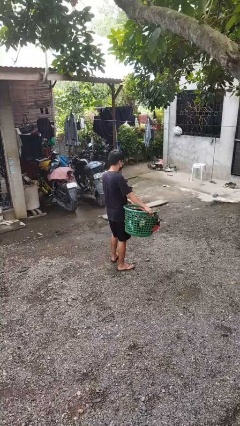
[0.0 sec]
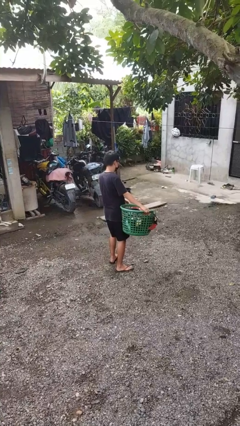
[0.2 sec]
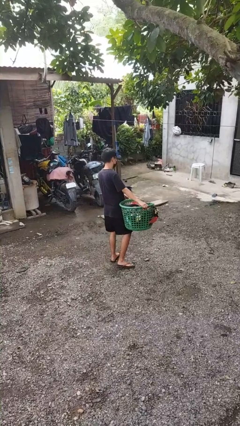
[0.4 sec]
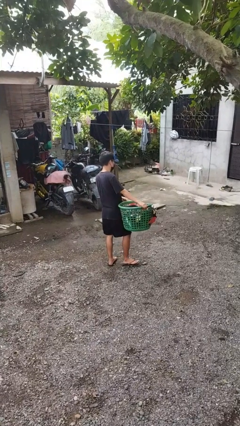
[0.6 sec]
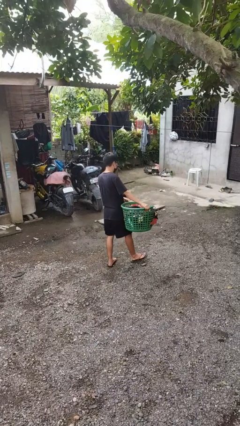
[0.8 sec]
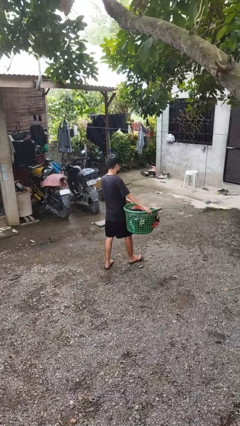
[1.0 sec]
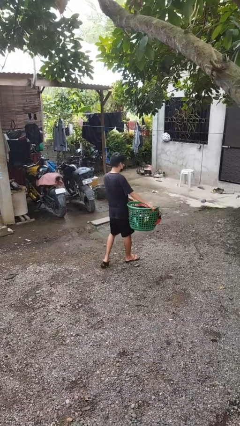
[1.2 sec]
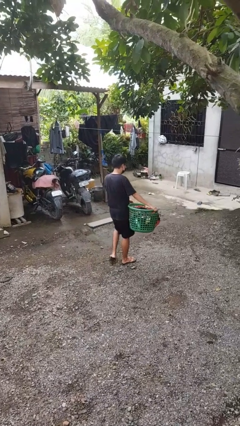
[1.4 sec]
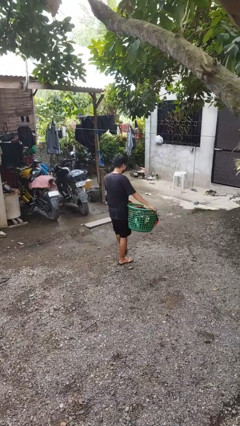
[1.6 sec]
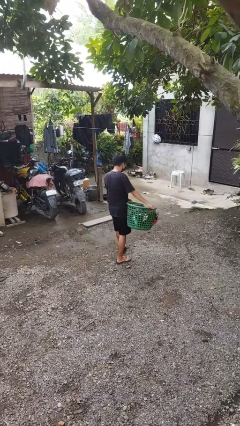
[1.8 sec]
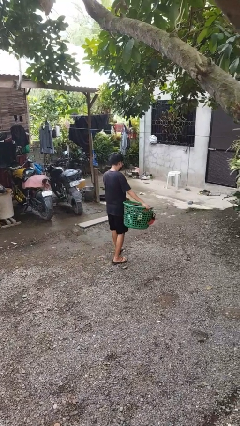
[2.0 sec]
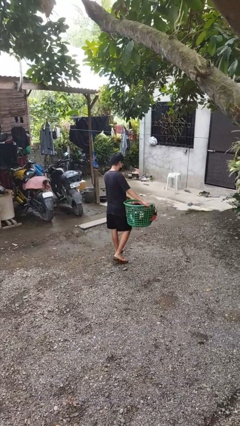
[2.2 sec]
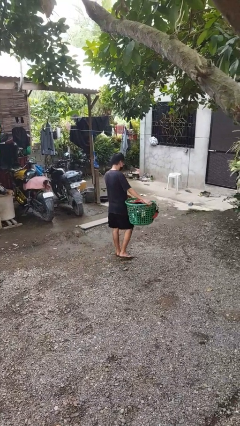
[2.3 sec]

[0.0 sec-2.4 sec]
person carries laundry basket

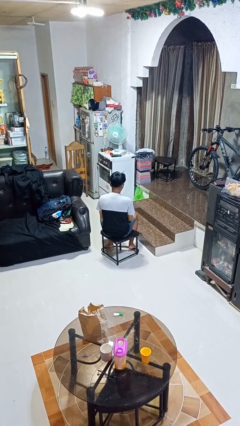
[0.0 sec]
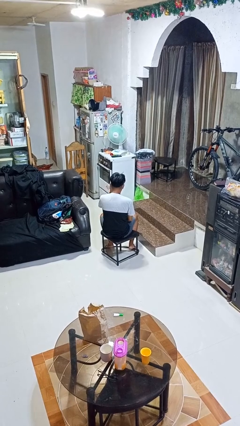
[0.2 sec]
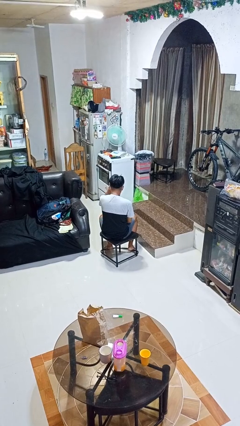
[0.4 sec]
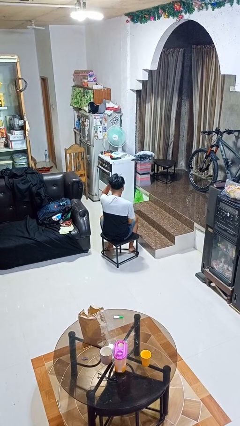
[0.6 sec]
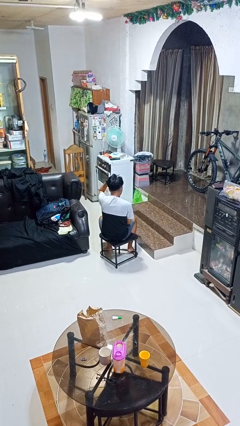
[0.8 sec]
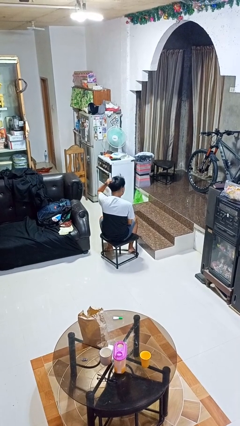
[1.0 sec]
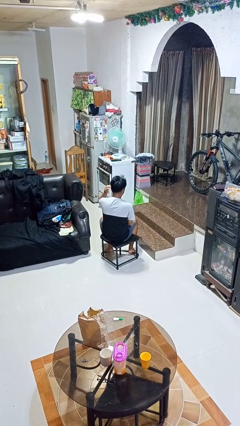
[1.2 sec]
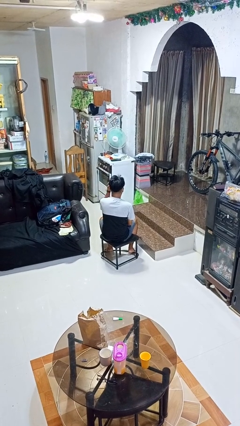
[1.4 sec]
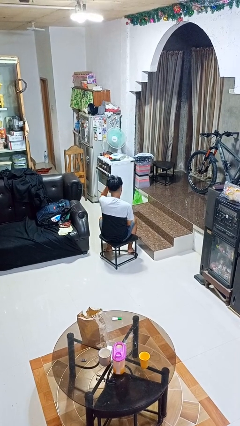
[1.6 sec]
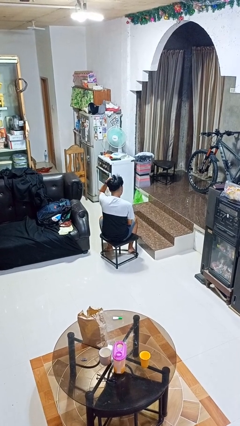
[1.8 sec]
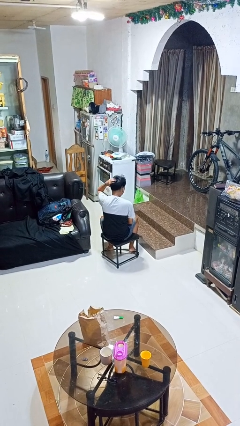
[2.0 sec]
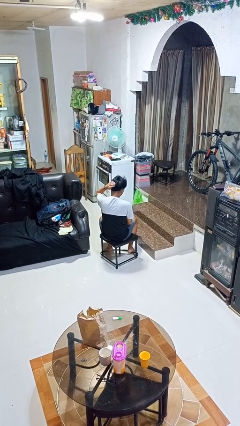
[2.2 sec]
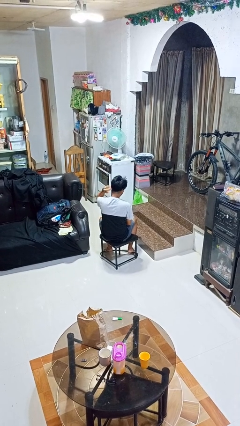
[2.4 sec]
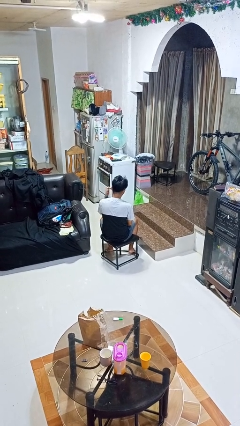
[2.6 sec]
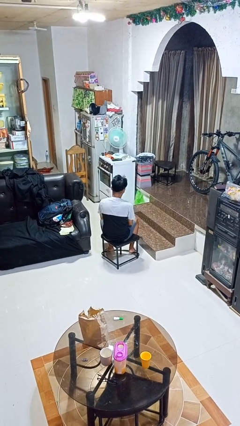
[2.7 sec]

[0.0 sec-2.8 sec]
person strokes hair

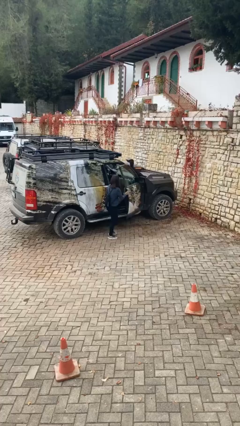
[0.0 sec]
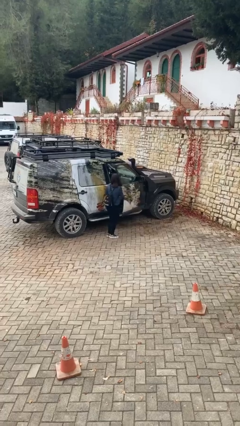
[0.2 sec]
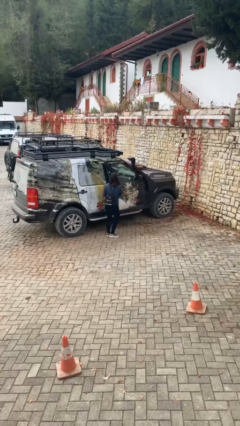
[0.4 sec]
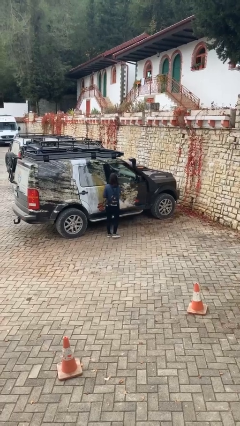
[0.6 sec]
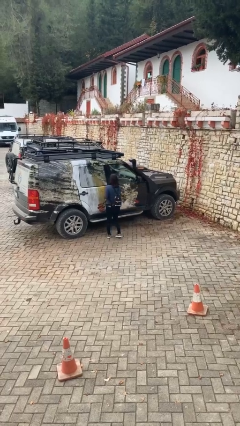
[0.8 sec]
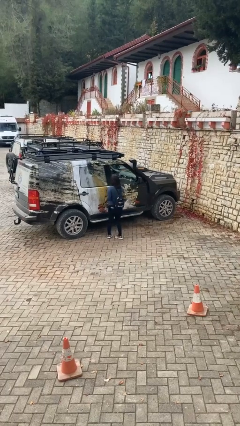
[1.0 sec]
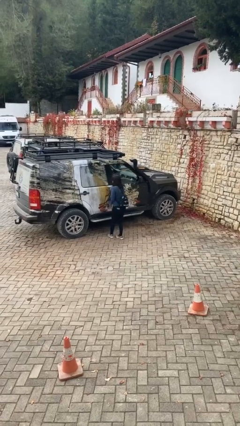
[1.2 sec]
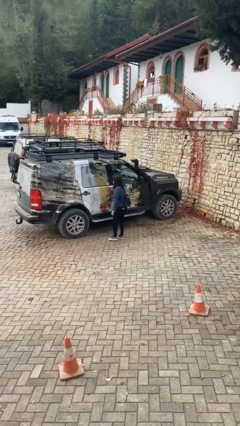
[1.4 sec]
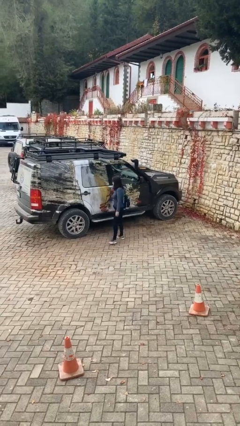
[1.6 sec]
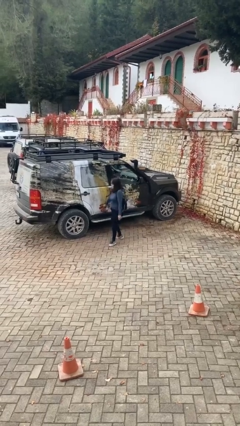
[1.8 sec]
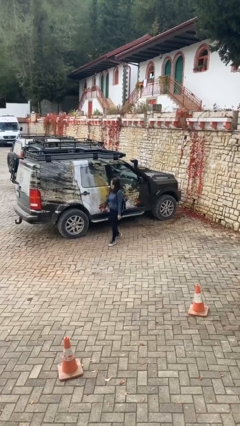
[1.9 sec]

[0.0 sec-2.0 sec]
person closes car door

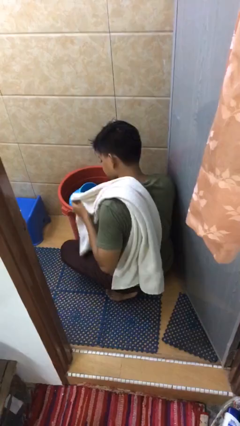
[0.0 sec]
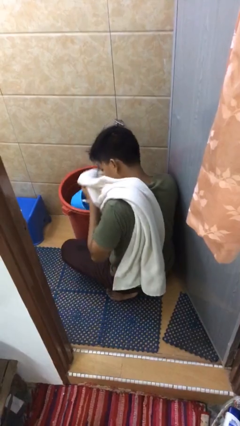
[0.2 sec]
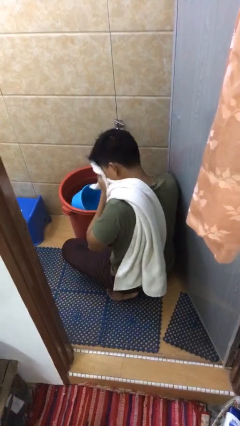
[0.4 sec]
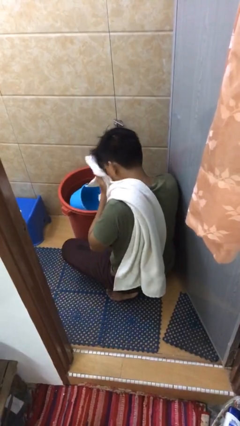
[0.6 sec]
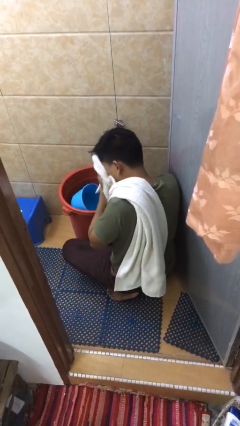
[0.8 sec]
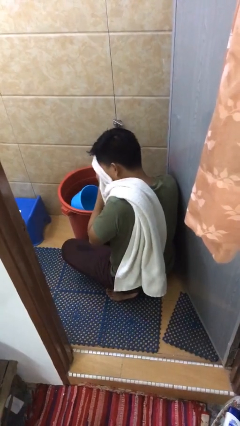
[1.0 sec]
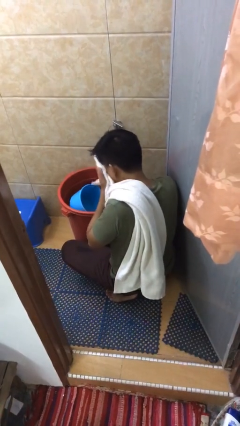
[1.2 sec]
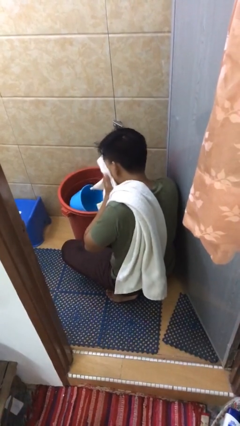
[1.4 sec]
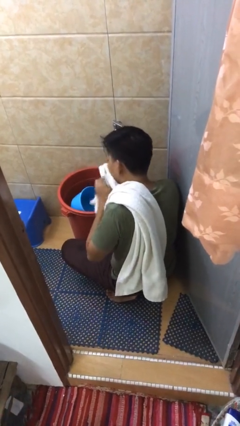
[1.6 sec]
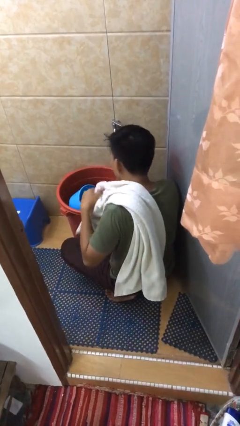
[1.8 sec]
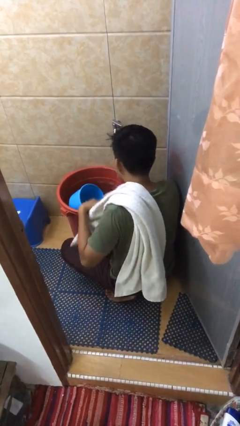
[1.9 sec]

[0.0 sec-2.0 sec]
person dries face with towel

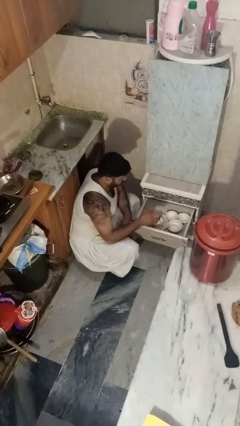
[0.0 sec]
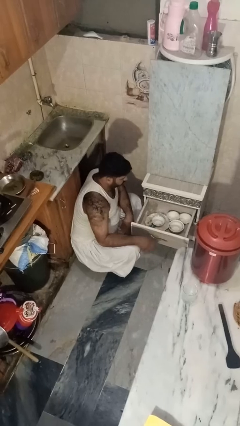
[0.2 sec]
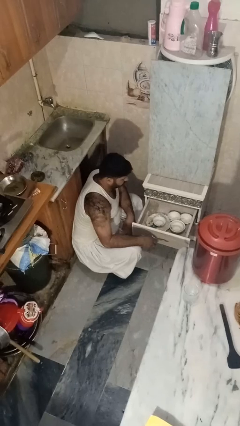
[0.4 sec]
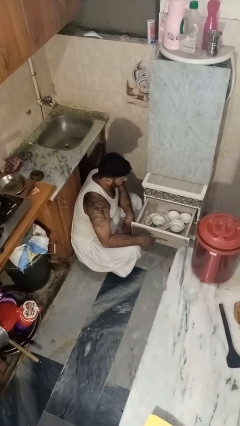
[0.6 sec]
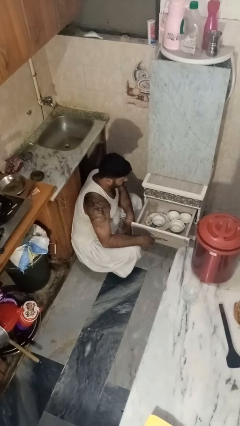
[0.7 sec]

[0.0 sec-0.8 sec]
person puts object into kitchen drawer

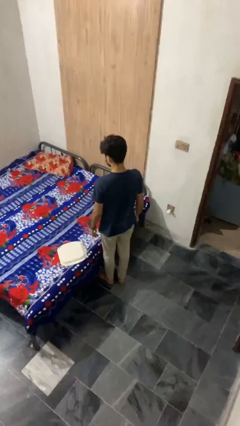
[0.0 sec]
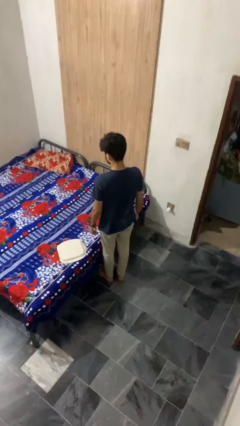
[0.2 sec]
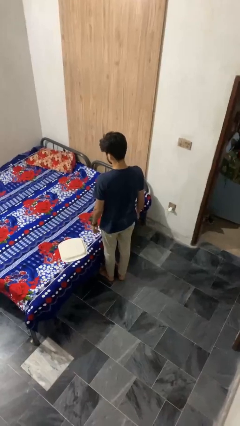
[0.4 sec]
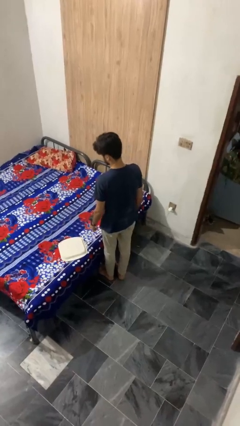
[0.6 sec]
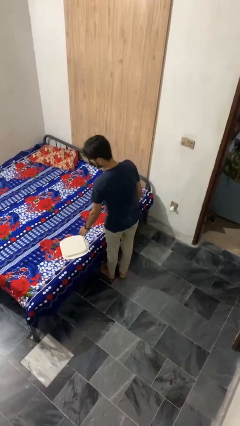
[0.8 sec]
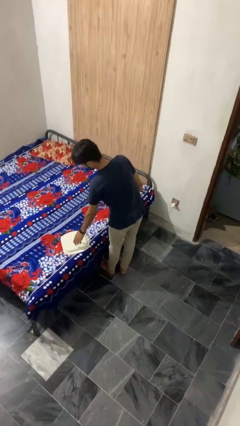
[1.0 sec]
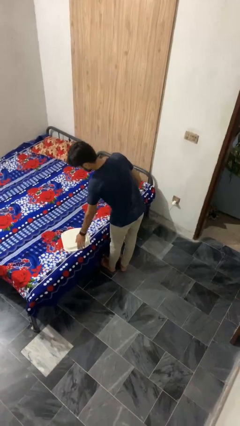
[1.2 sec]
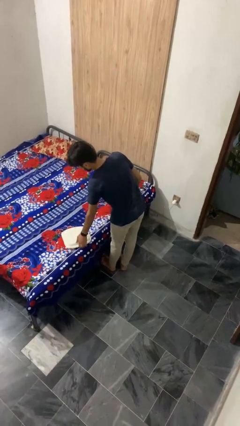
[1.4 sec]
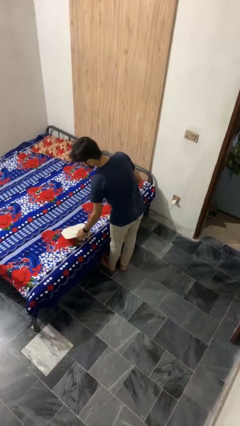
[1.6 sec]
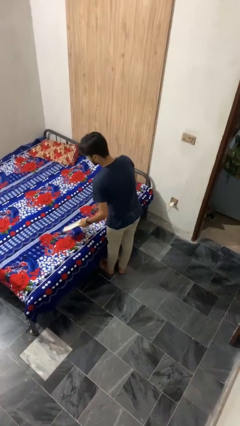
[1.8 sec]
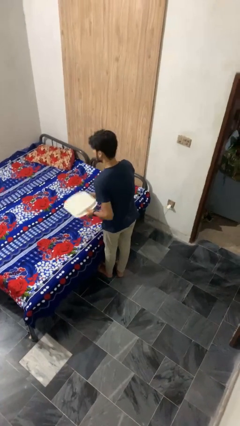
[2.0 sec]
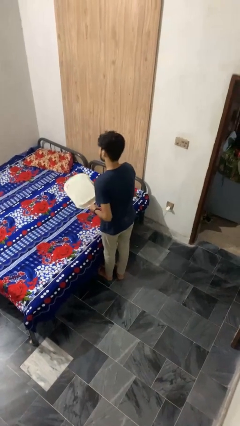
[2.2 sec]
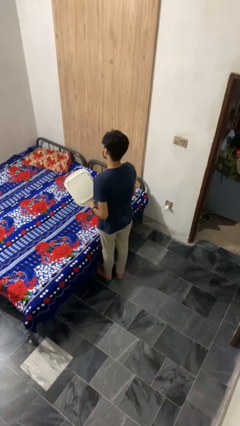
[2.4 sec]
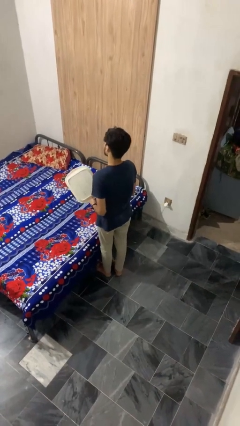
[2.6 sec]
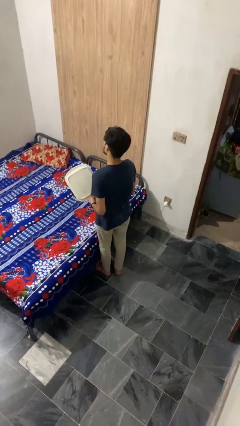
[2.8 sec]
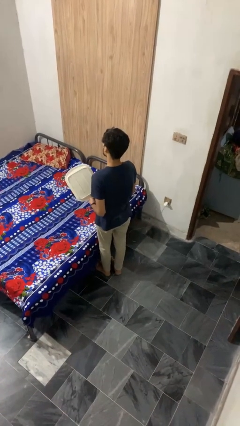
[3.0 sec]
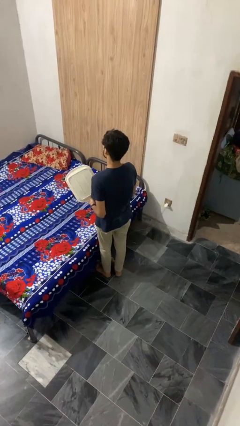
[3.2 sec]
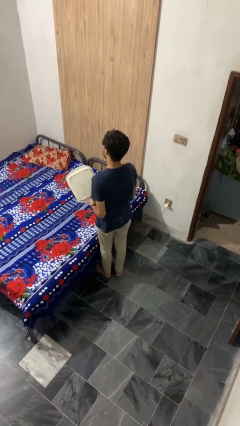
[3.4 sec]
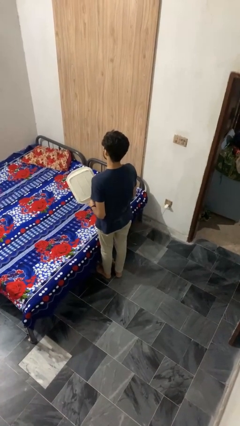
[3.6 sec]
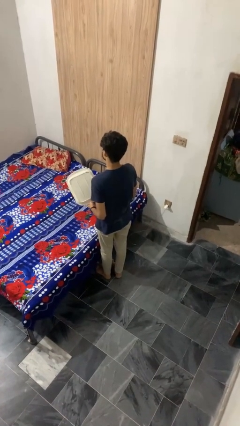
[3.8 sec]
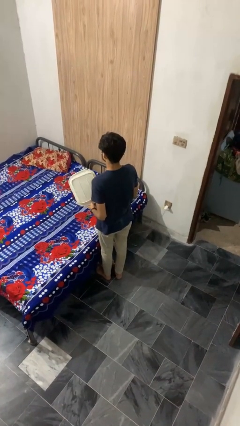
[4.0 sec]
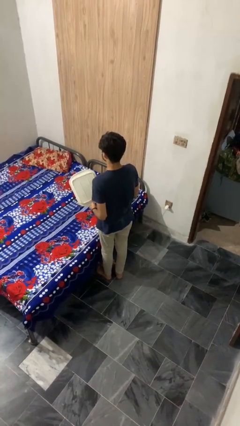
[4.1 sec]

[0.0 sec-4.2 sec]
person picks up object from bed

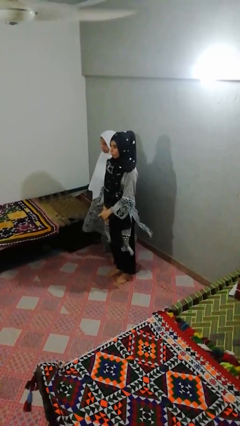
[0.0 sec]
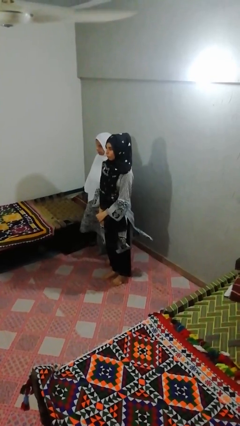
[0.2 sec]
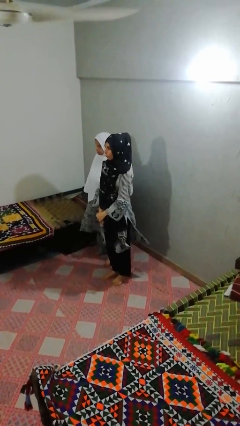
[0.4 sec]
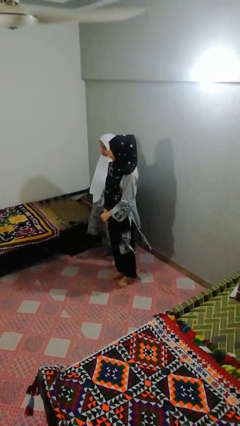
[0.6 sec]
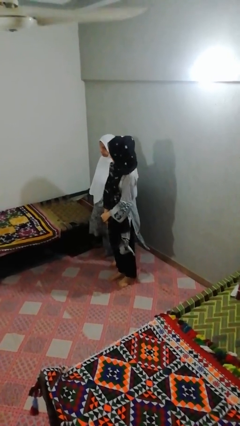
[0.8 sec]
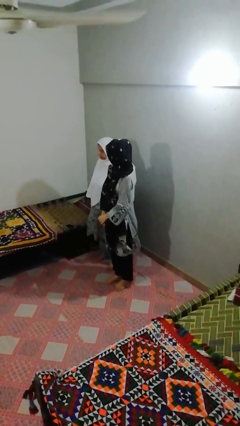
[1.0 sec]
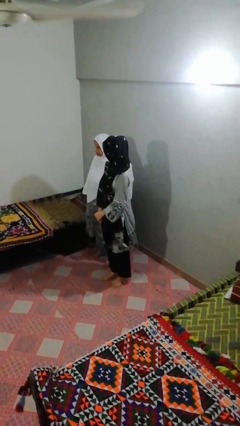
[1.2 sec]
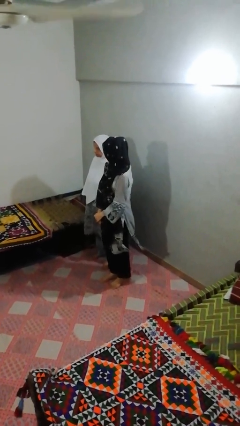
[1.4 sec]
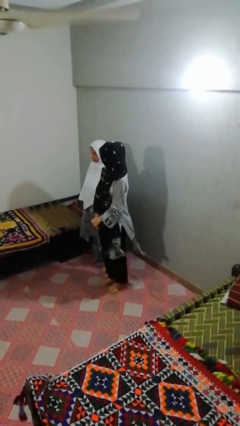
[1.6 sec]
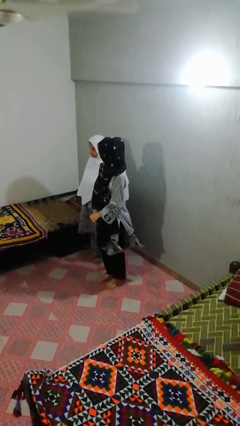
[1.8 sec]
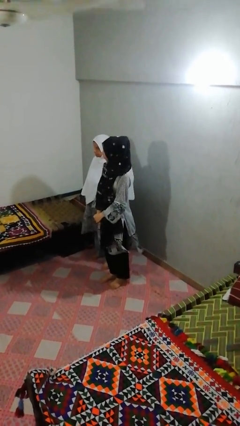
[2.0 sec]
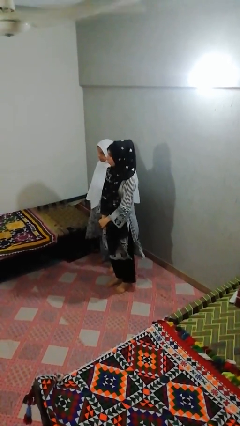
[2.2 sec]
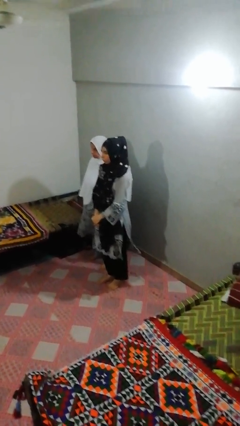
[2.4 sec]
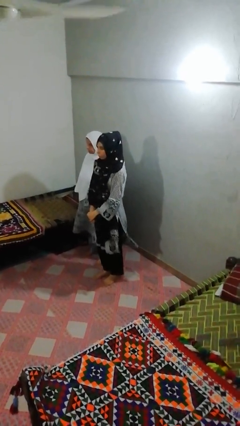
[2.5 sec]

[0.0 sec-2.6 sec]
person looks over shoulder
